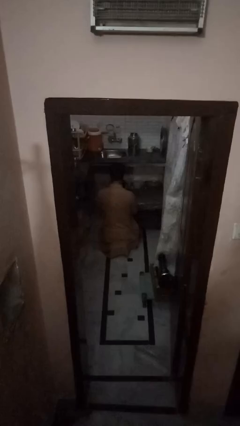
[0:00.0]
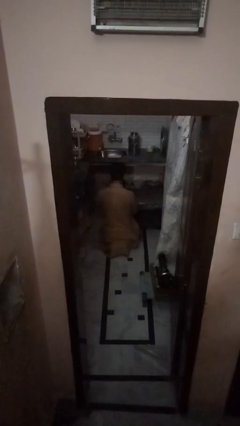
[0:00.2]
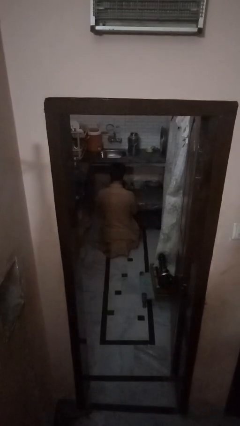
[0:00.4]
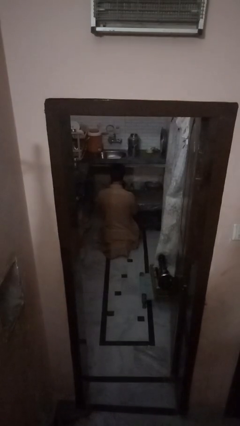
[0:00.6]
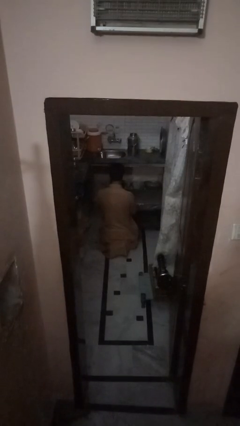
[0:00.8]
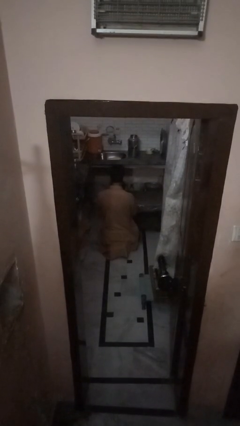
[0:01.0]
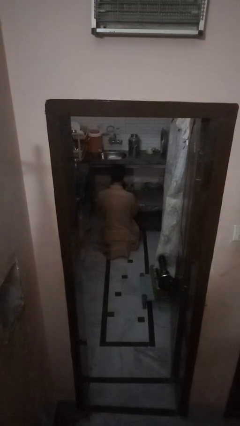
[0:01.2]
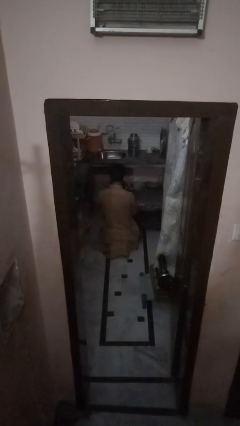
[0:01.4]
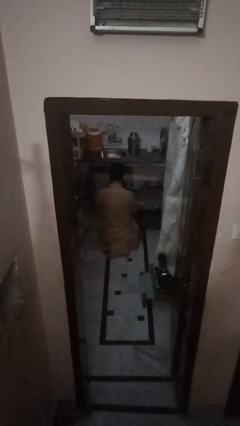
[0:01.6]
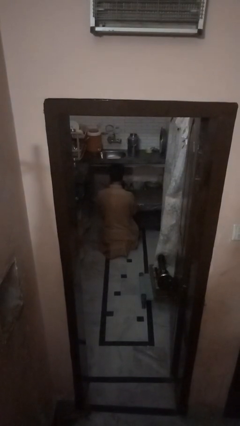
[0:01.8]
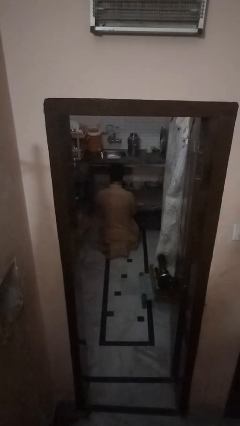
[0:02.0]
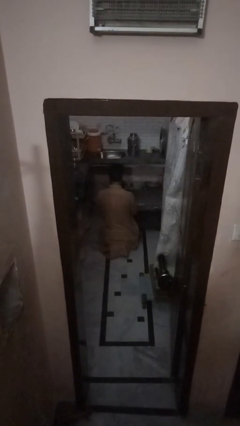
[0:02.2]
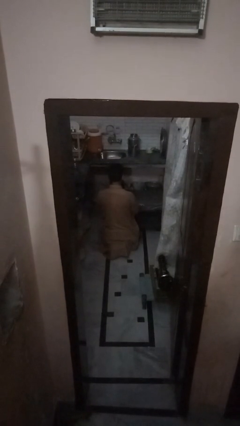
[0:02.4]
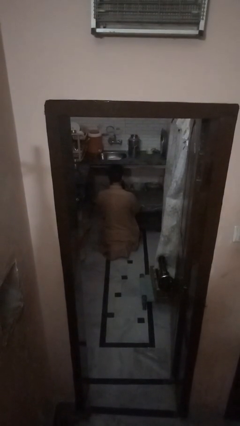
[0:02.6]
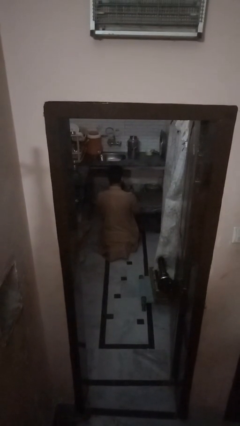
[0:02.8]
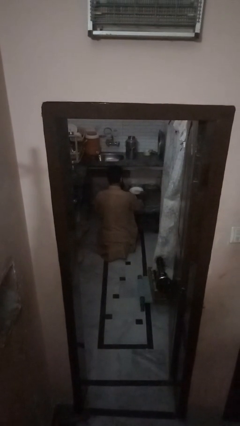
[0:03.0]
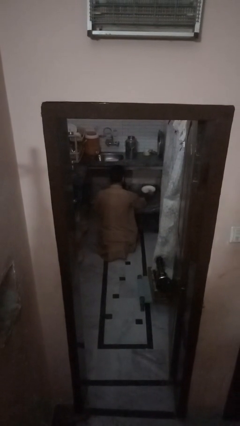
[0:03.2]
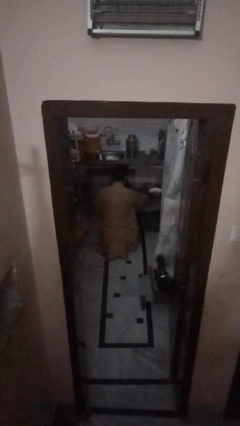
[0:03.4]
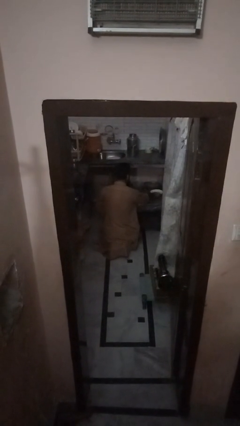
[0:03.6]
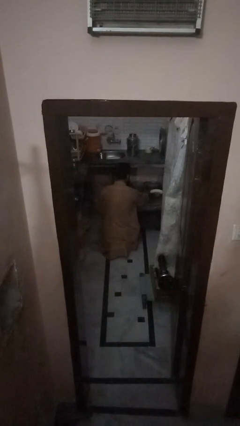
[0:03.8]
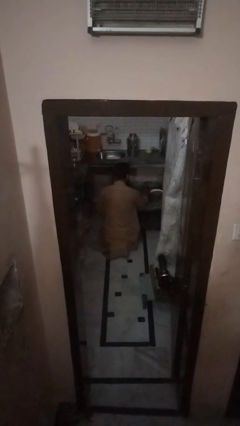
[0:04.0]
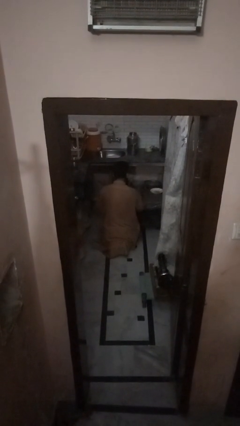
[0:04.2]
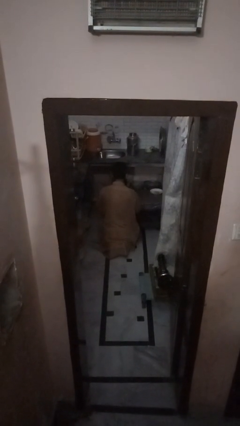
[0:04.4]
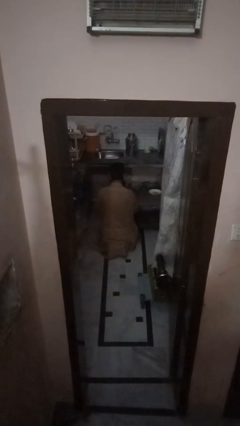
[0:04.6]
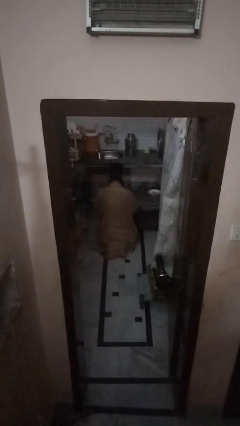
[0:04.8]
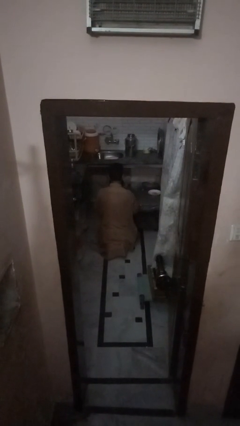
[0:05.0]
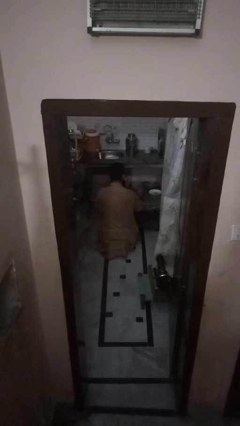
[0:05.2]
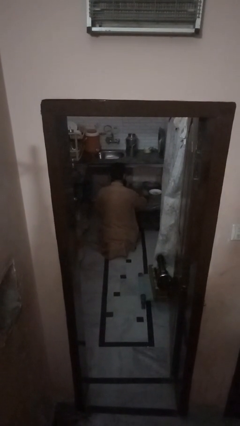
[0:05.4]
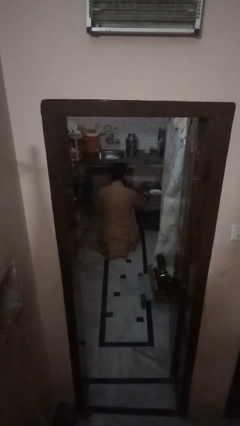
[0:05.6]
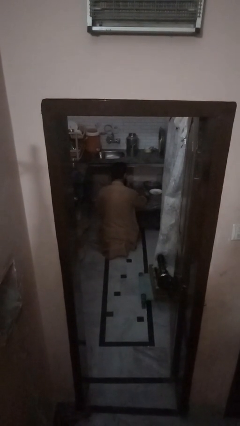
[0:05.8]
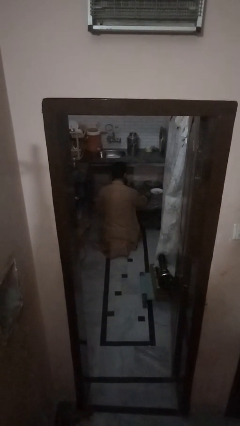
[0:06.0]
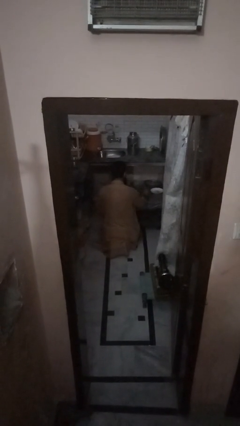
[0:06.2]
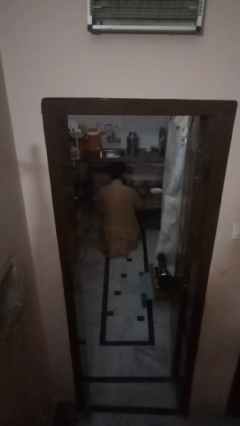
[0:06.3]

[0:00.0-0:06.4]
person sets table

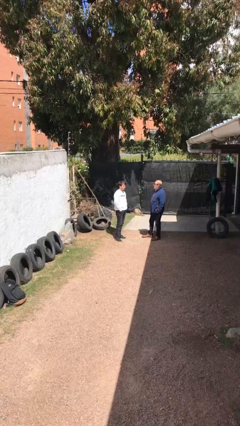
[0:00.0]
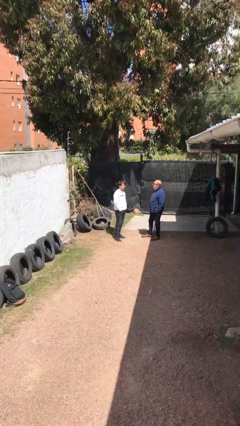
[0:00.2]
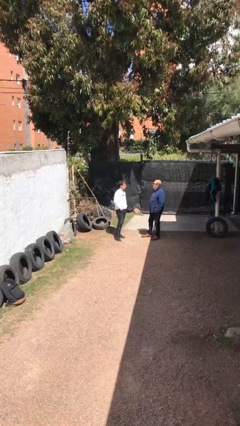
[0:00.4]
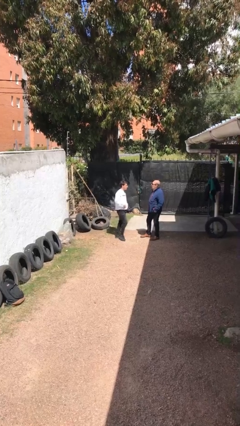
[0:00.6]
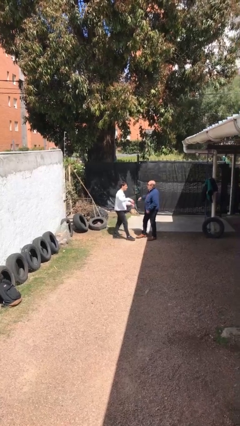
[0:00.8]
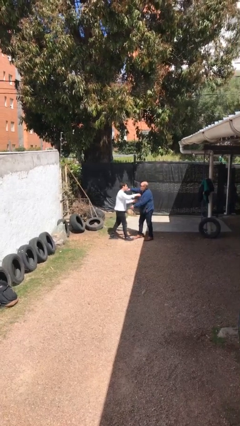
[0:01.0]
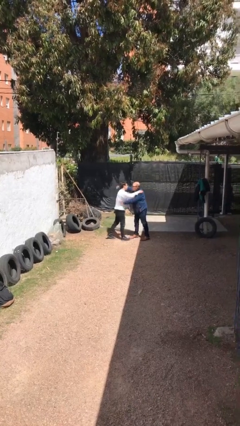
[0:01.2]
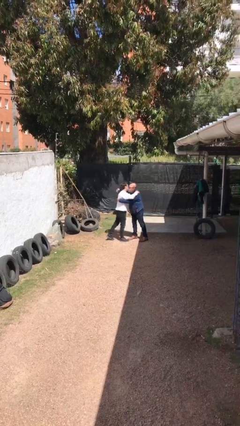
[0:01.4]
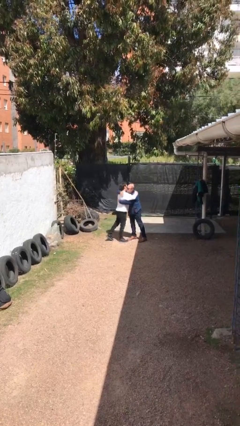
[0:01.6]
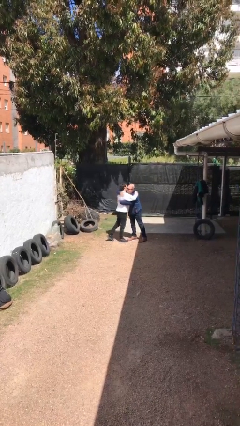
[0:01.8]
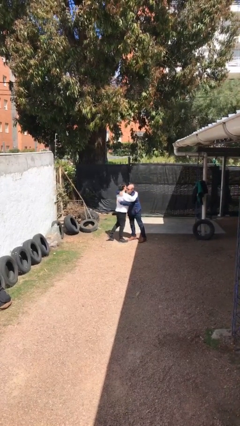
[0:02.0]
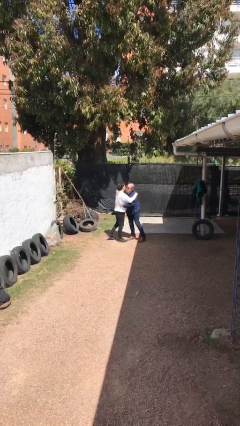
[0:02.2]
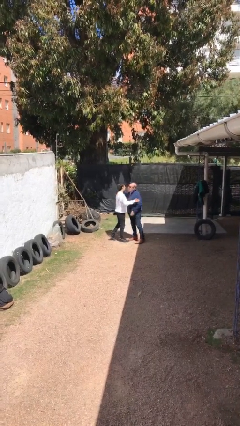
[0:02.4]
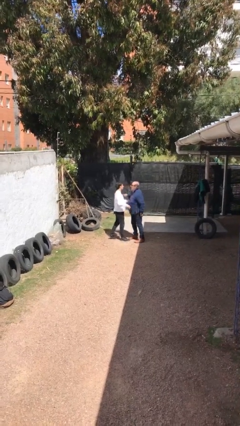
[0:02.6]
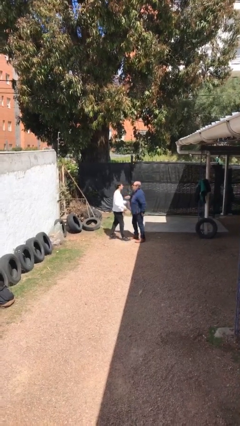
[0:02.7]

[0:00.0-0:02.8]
person embraces person

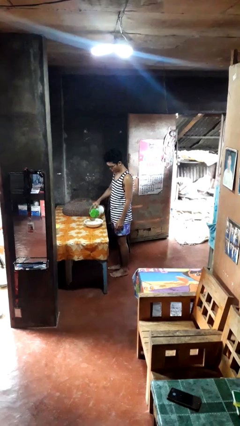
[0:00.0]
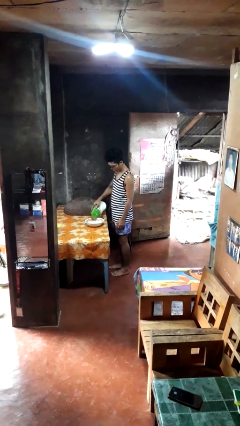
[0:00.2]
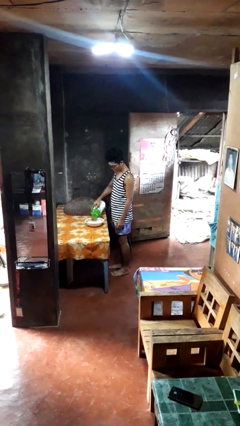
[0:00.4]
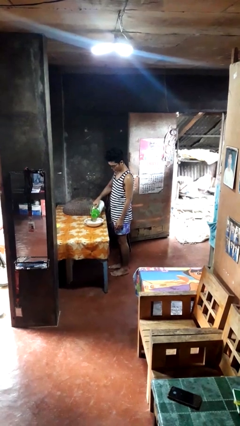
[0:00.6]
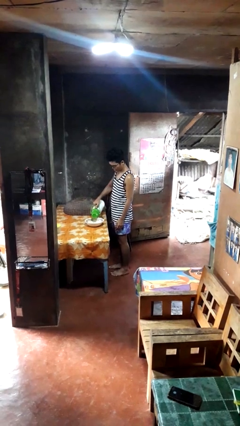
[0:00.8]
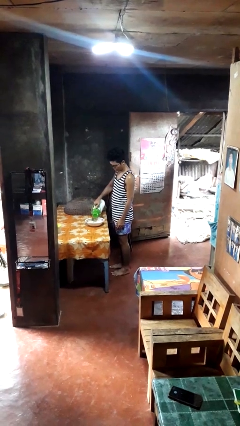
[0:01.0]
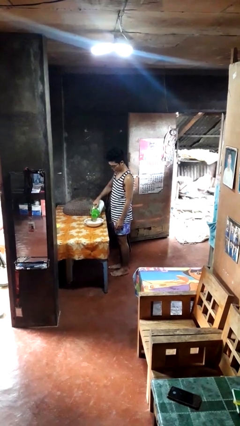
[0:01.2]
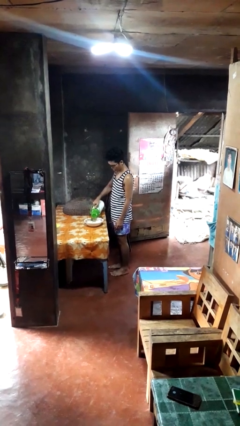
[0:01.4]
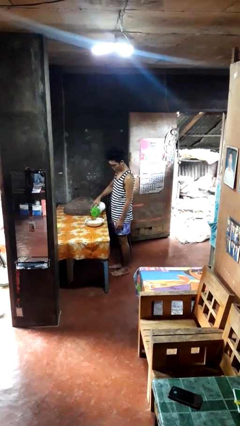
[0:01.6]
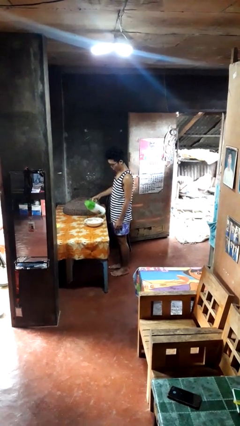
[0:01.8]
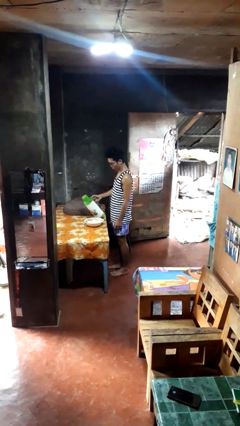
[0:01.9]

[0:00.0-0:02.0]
person pours into bowl

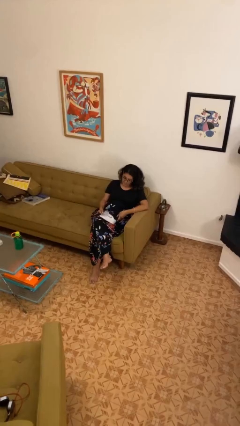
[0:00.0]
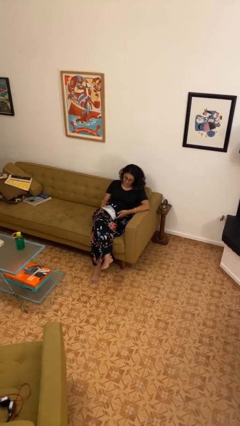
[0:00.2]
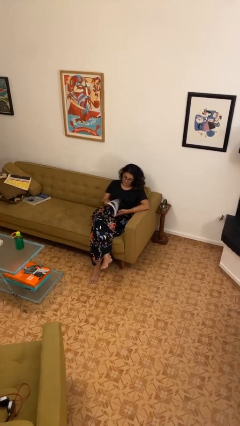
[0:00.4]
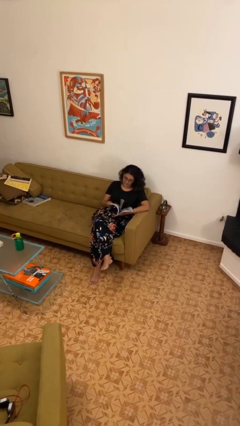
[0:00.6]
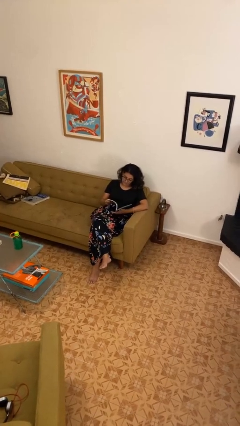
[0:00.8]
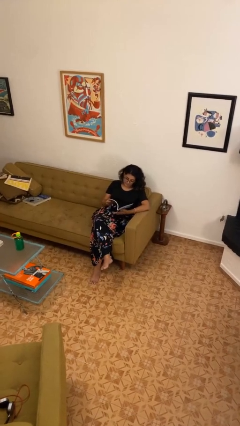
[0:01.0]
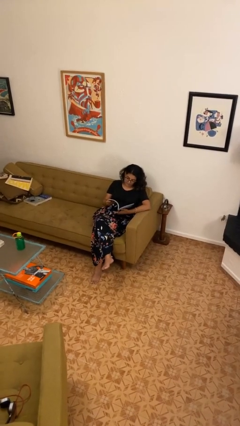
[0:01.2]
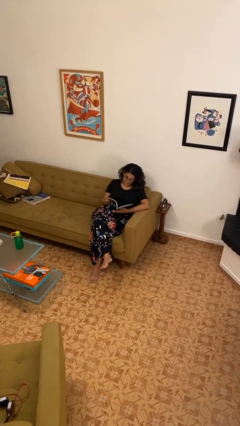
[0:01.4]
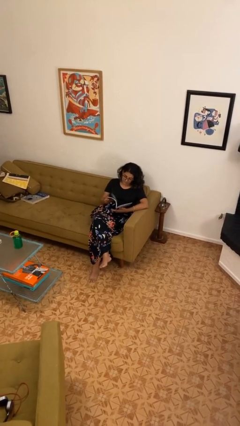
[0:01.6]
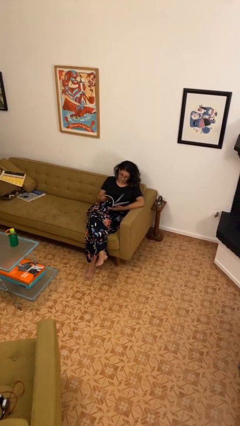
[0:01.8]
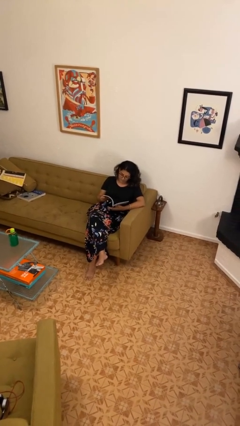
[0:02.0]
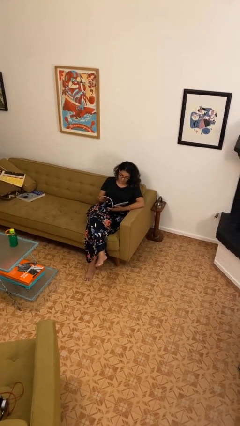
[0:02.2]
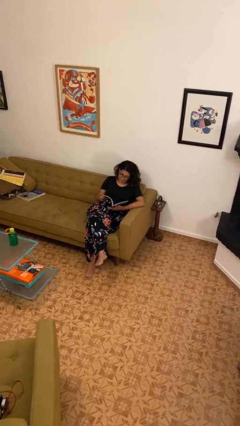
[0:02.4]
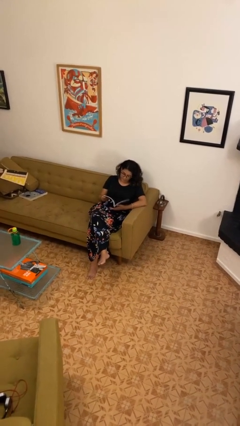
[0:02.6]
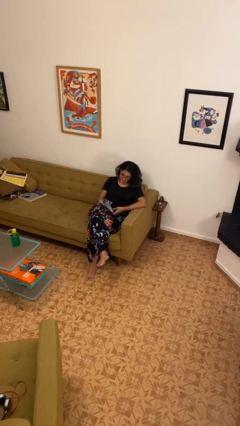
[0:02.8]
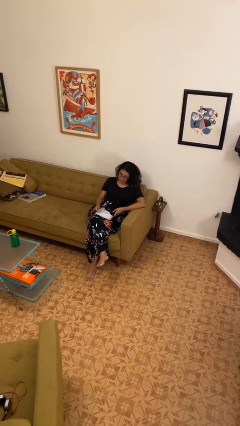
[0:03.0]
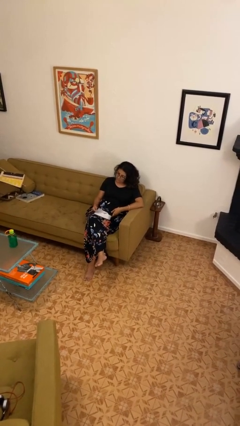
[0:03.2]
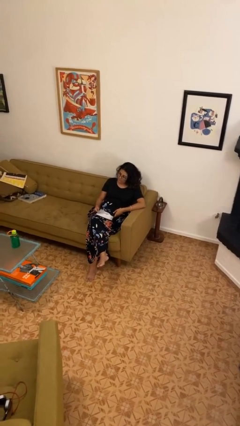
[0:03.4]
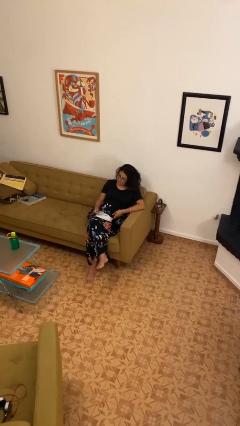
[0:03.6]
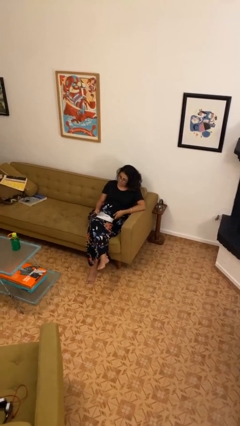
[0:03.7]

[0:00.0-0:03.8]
person reads magazine

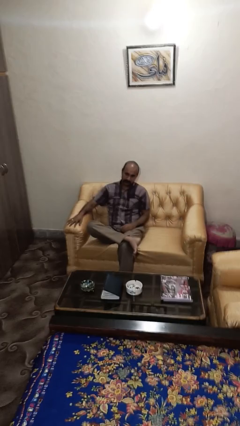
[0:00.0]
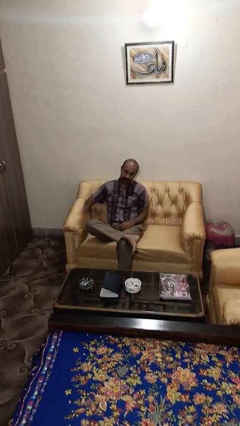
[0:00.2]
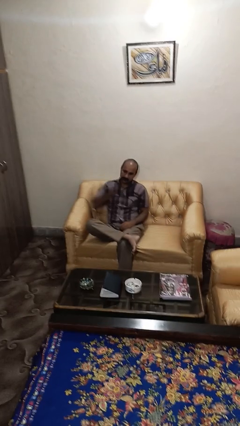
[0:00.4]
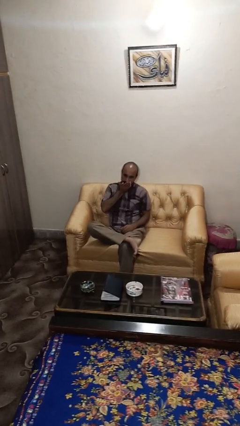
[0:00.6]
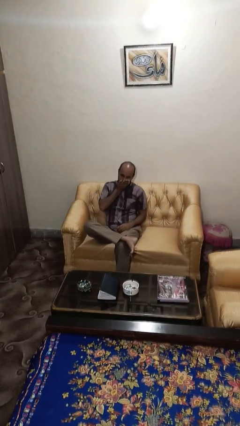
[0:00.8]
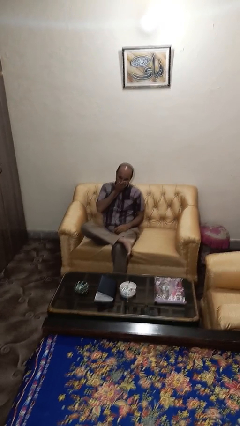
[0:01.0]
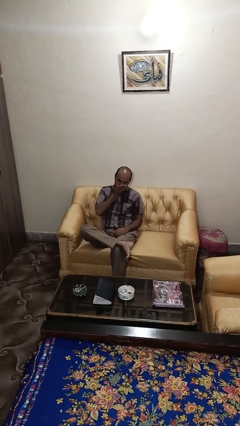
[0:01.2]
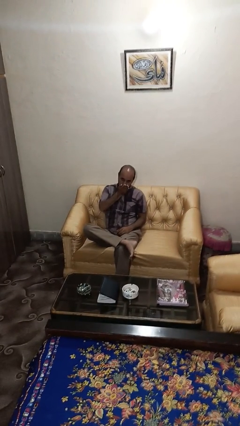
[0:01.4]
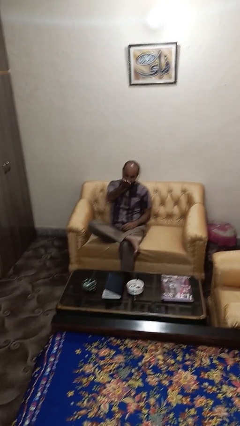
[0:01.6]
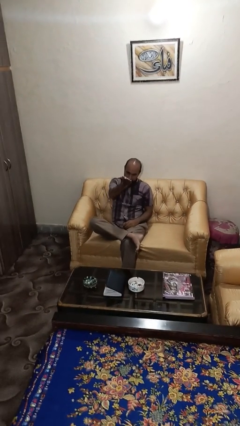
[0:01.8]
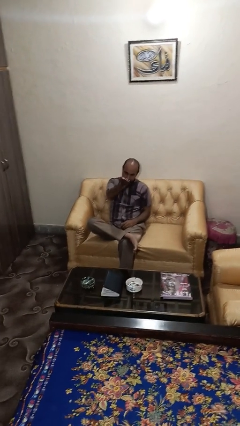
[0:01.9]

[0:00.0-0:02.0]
person gestures blow kiss

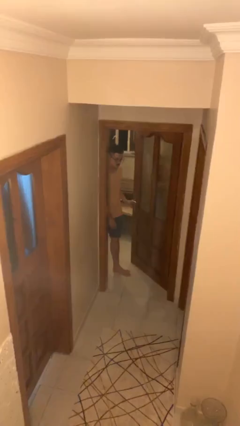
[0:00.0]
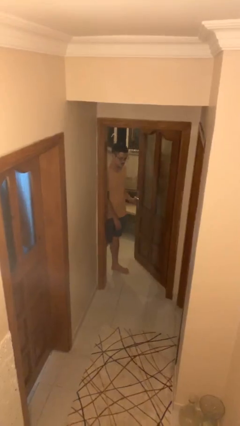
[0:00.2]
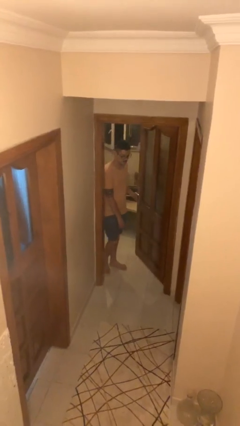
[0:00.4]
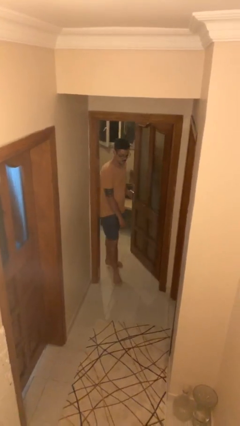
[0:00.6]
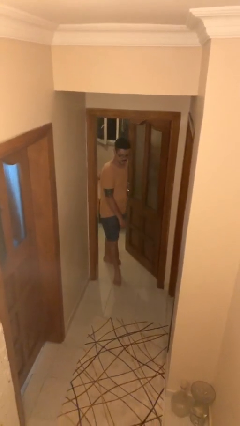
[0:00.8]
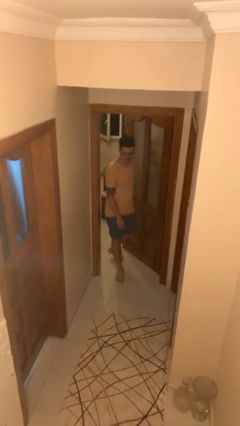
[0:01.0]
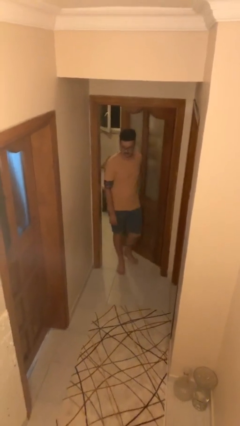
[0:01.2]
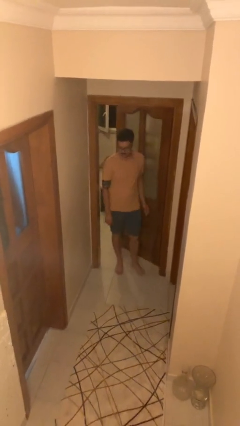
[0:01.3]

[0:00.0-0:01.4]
person enters scene through structure
